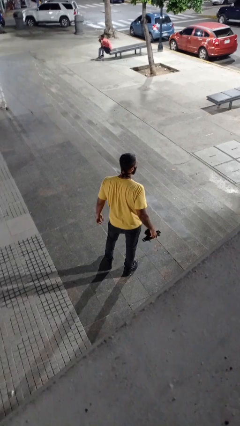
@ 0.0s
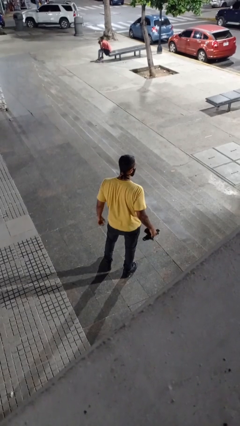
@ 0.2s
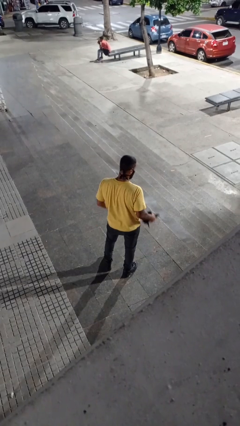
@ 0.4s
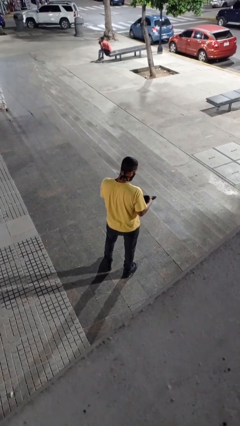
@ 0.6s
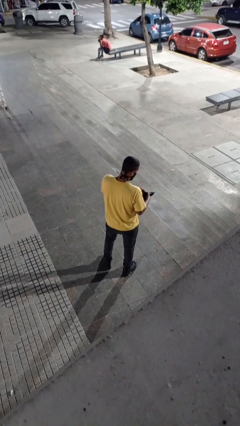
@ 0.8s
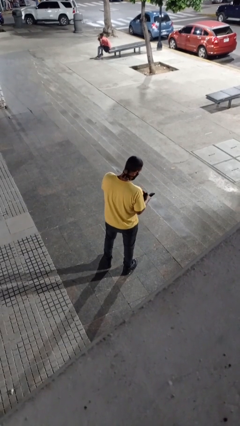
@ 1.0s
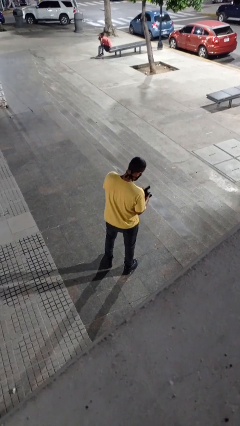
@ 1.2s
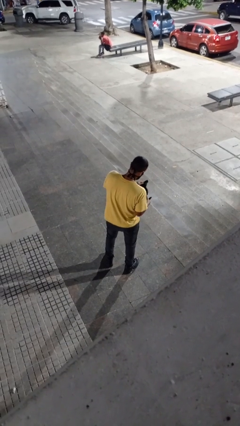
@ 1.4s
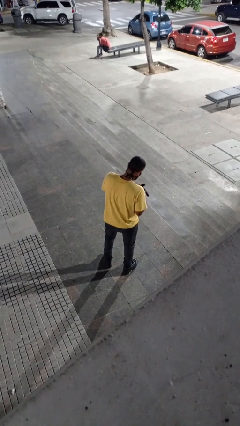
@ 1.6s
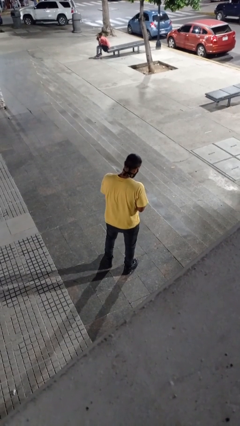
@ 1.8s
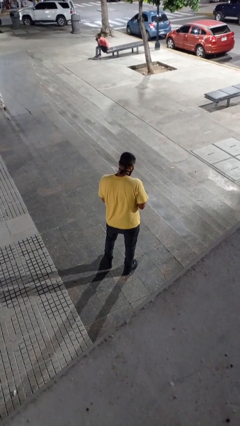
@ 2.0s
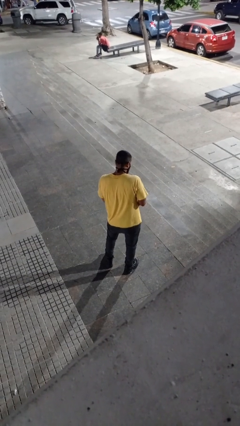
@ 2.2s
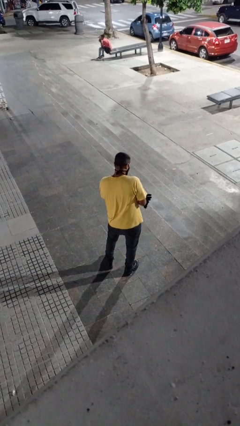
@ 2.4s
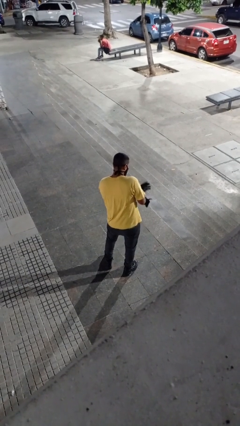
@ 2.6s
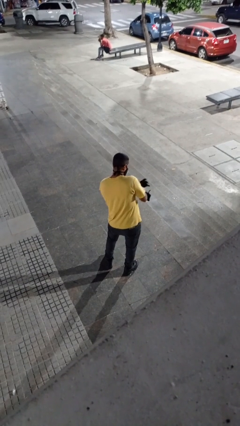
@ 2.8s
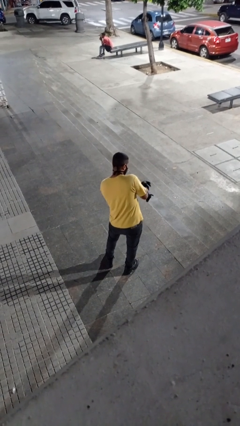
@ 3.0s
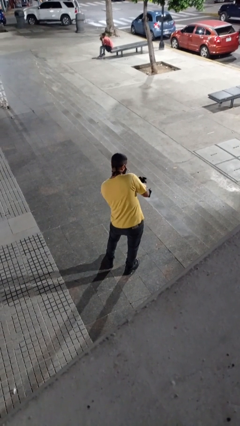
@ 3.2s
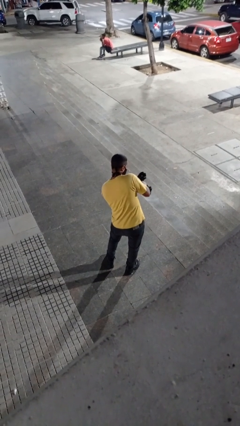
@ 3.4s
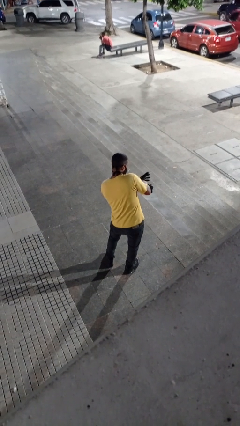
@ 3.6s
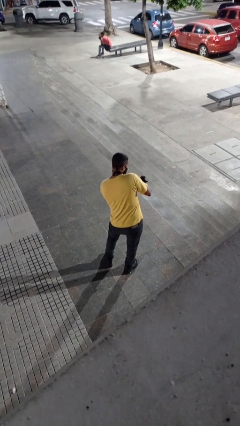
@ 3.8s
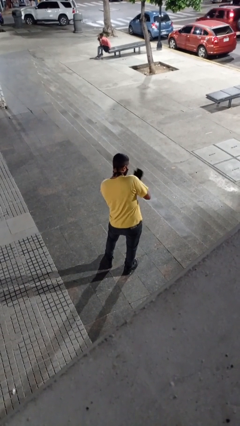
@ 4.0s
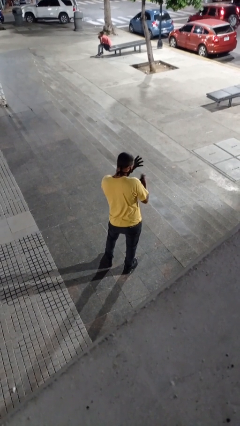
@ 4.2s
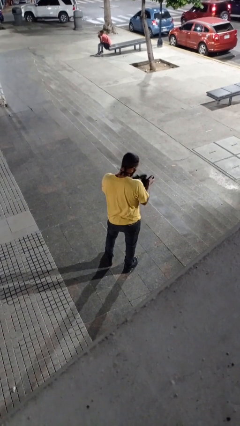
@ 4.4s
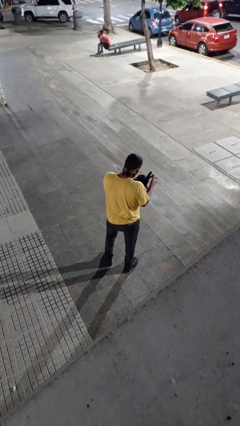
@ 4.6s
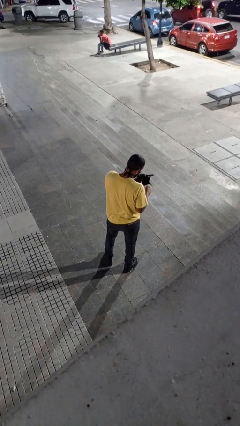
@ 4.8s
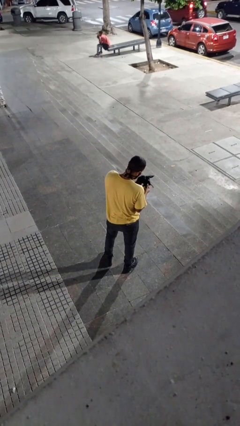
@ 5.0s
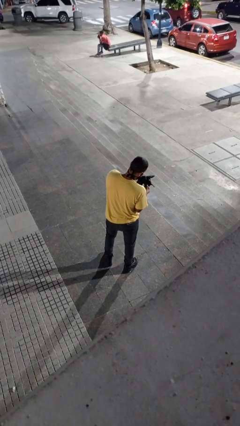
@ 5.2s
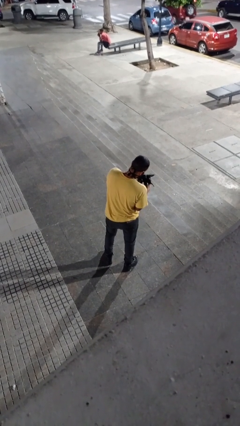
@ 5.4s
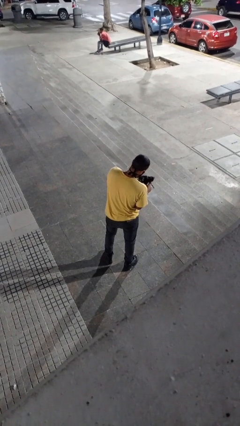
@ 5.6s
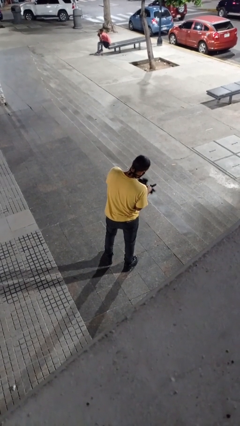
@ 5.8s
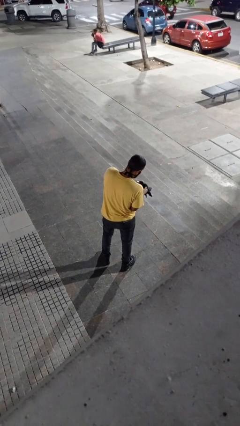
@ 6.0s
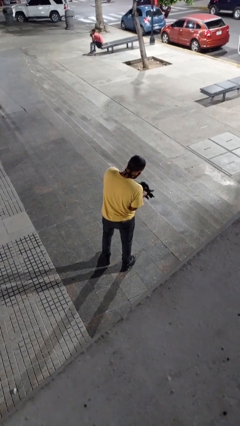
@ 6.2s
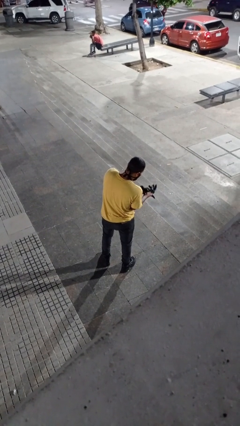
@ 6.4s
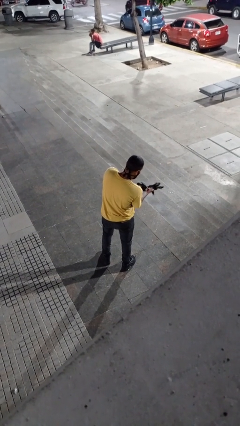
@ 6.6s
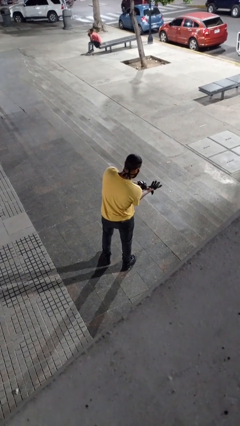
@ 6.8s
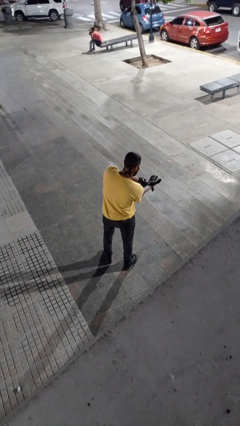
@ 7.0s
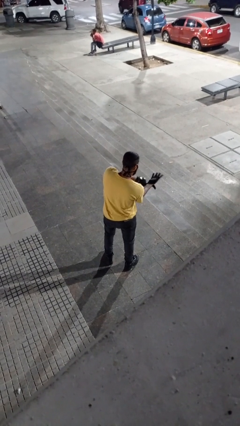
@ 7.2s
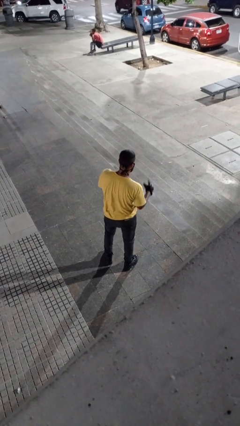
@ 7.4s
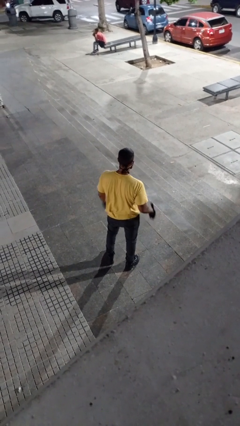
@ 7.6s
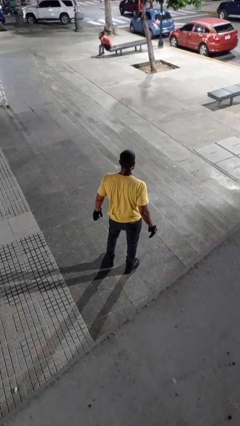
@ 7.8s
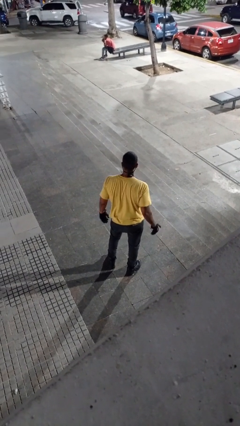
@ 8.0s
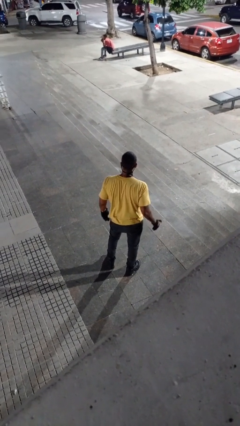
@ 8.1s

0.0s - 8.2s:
person puts on gloves

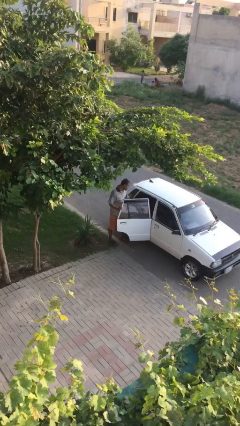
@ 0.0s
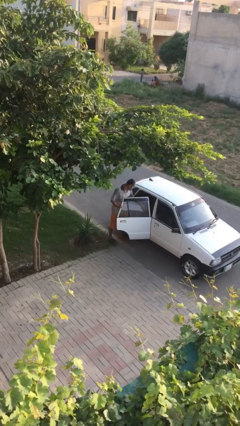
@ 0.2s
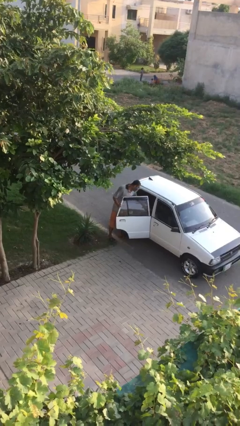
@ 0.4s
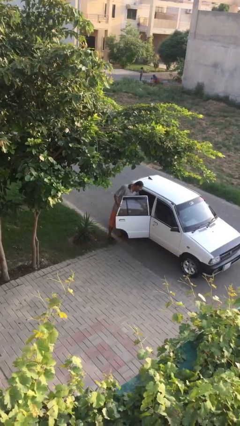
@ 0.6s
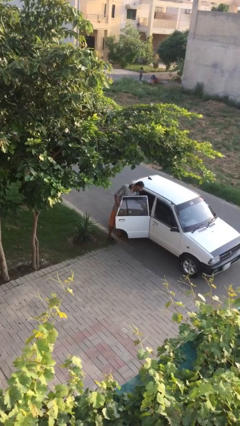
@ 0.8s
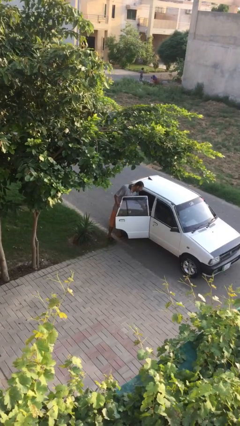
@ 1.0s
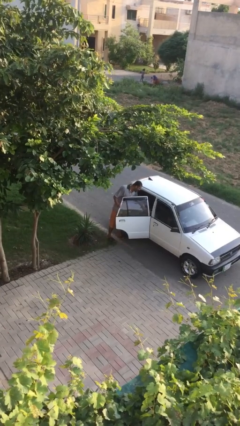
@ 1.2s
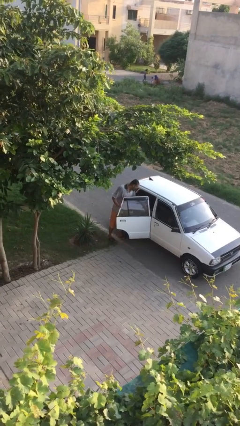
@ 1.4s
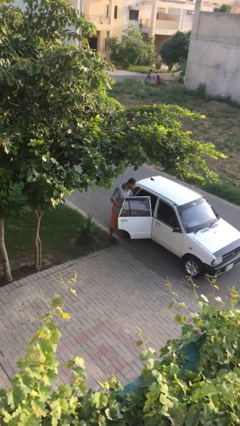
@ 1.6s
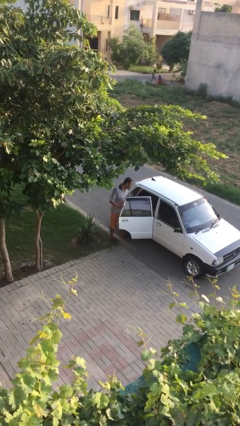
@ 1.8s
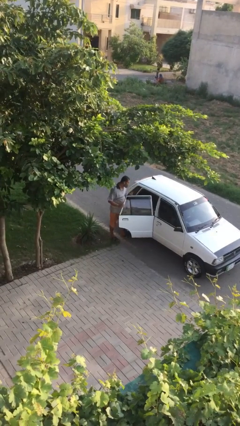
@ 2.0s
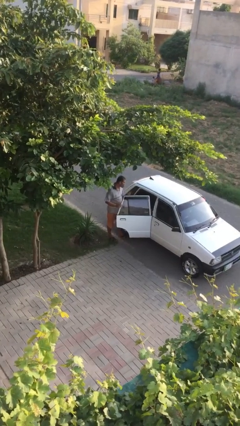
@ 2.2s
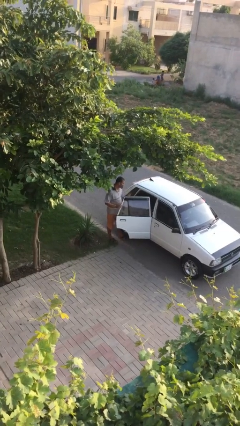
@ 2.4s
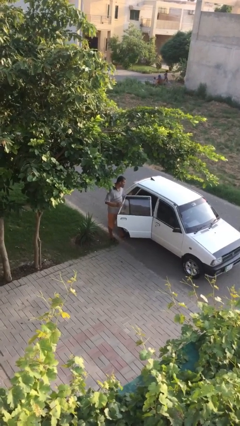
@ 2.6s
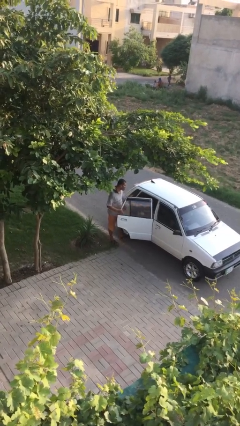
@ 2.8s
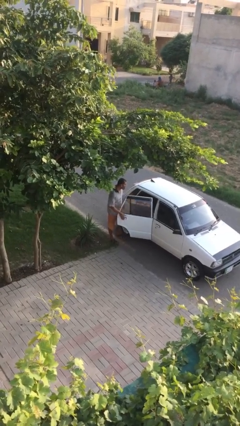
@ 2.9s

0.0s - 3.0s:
person loads car

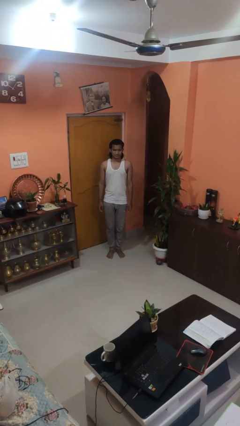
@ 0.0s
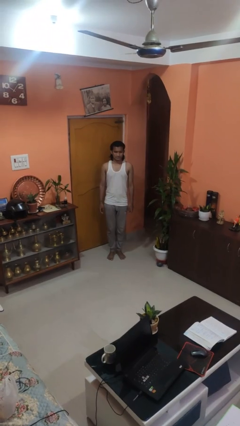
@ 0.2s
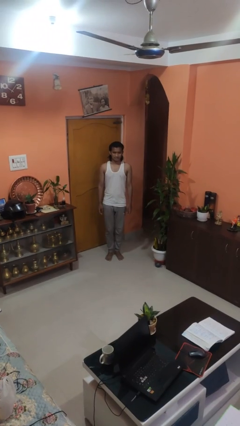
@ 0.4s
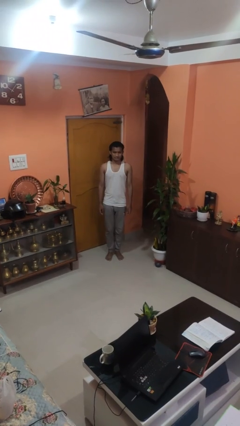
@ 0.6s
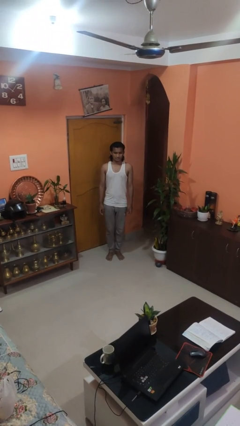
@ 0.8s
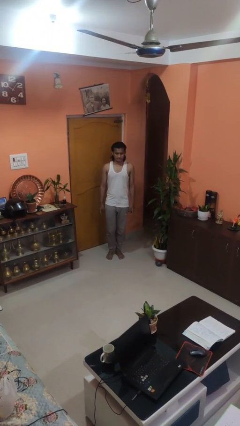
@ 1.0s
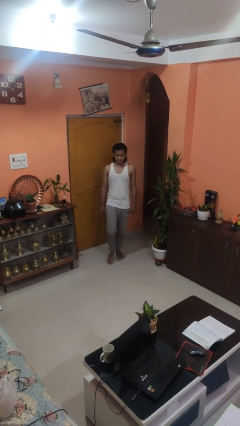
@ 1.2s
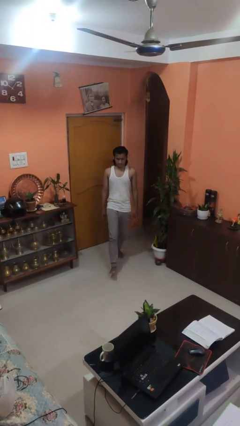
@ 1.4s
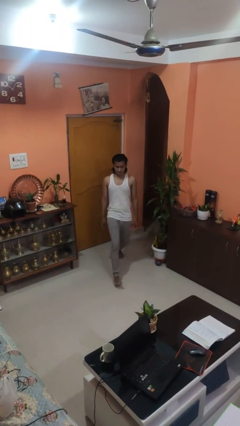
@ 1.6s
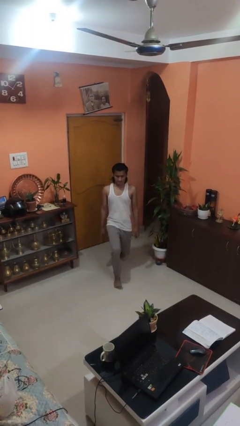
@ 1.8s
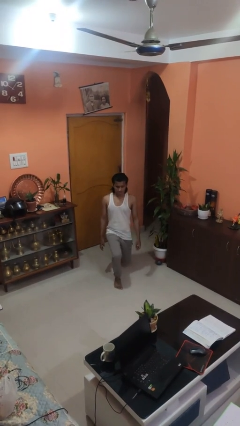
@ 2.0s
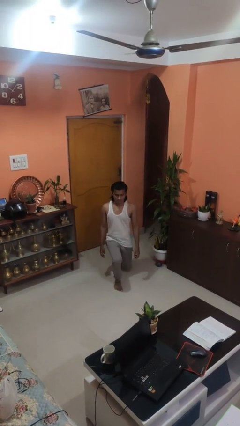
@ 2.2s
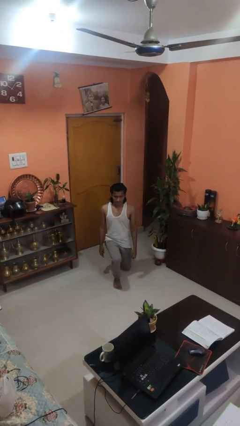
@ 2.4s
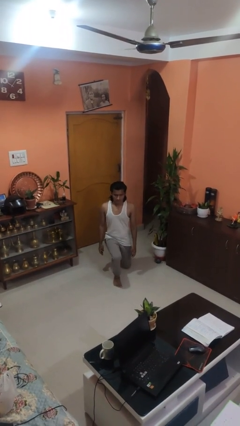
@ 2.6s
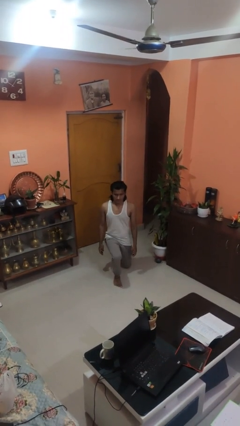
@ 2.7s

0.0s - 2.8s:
person kneels

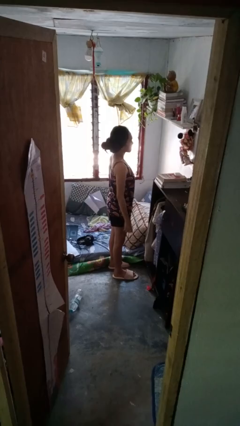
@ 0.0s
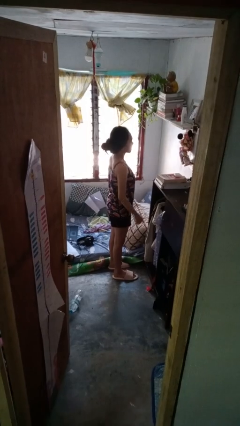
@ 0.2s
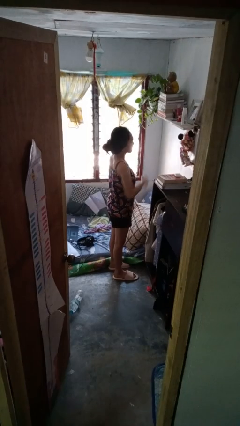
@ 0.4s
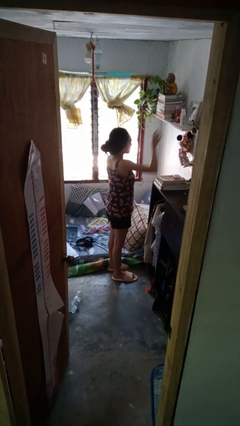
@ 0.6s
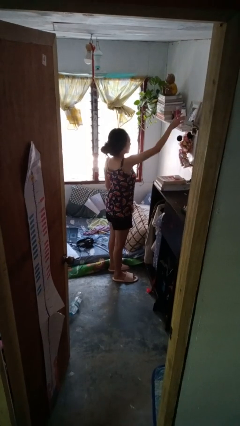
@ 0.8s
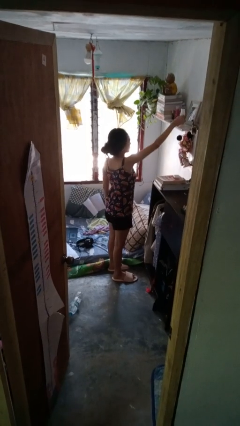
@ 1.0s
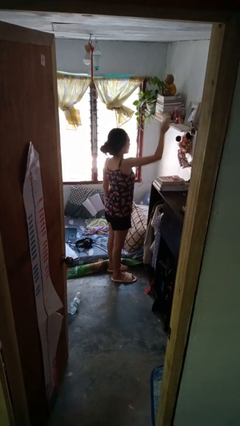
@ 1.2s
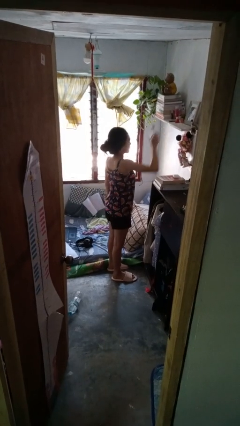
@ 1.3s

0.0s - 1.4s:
person picks up object from shelf

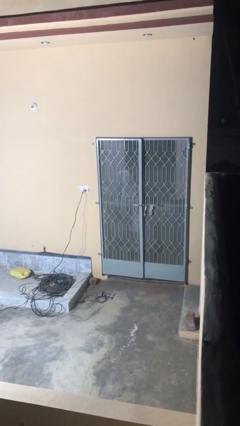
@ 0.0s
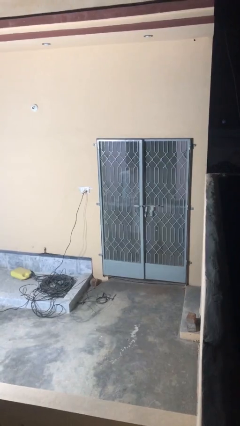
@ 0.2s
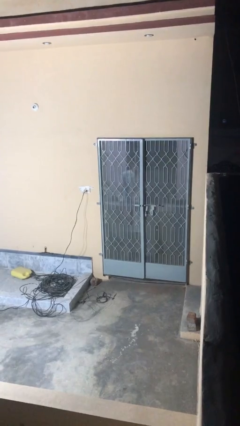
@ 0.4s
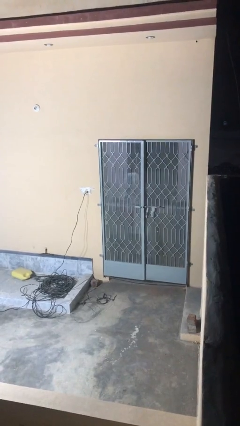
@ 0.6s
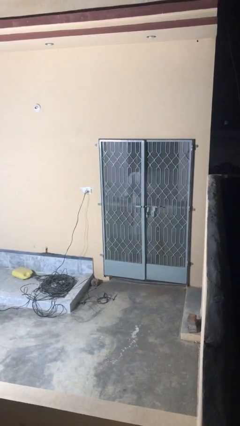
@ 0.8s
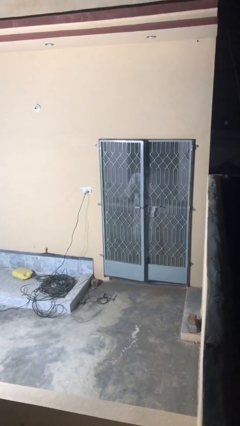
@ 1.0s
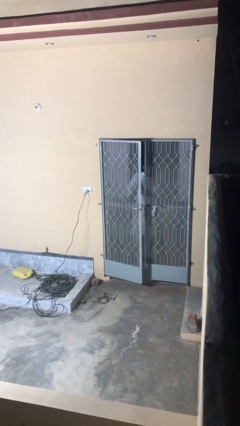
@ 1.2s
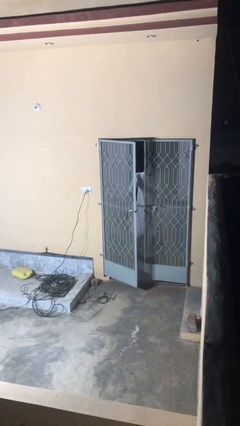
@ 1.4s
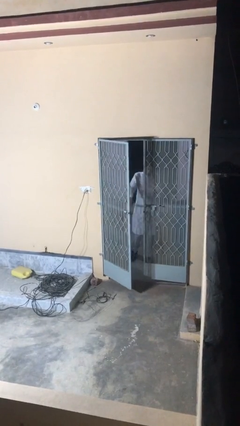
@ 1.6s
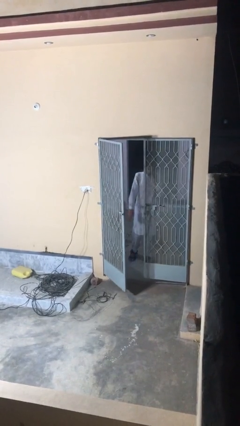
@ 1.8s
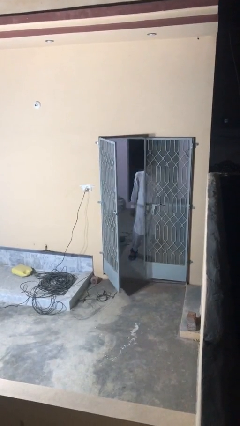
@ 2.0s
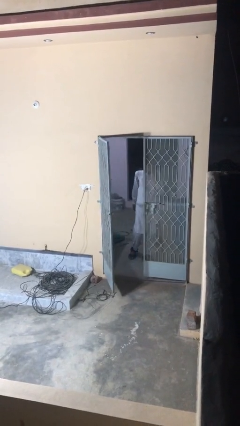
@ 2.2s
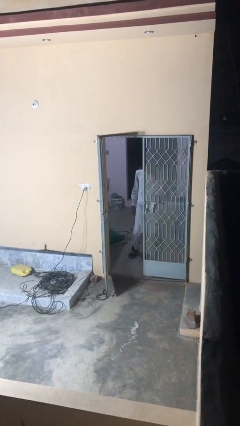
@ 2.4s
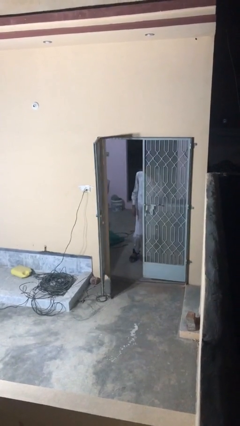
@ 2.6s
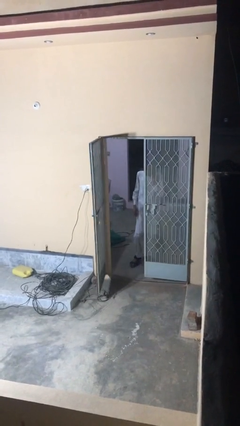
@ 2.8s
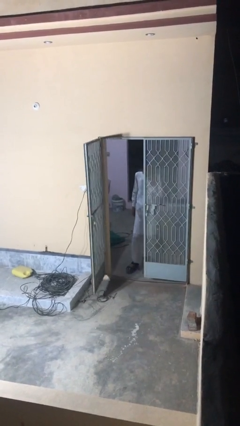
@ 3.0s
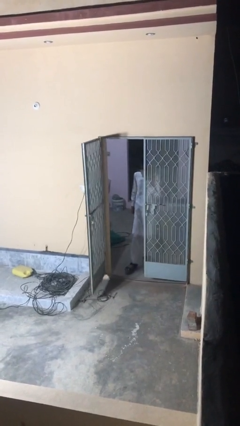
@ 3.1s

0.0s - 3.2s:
person opens facility door
